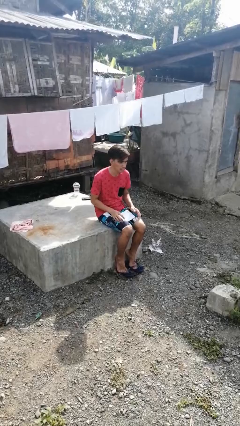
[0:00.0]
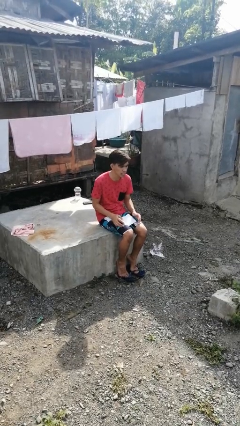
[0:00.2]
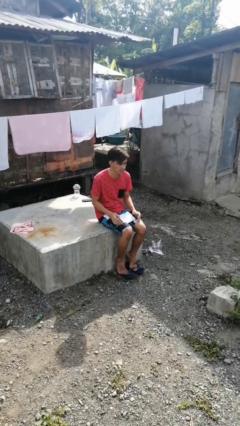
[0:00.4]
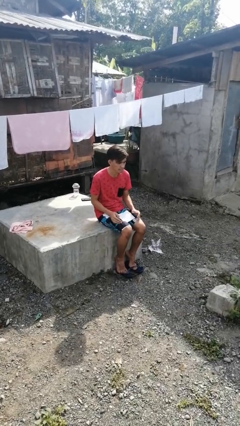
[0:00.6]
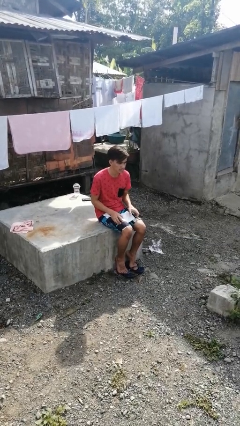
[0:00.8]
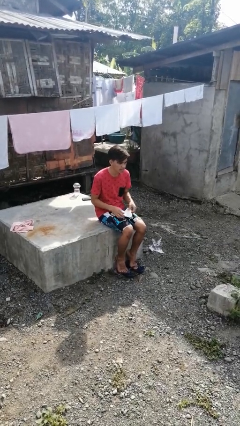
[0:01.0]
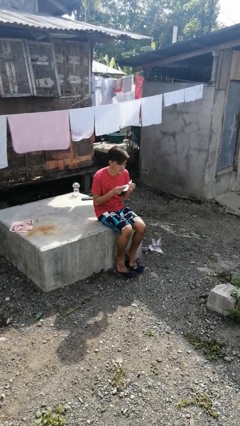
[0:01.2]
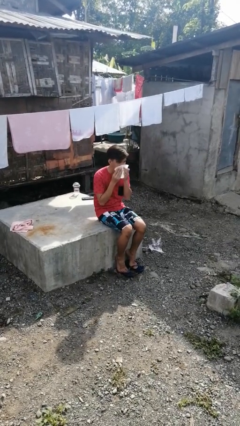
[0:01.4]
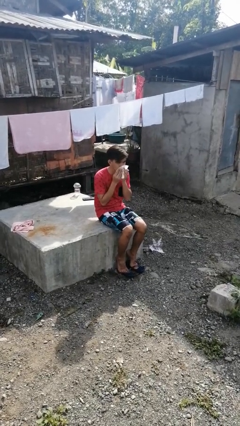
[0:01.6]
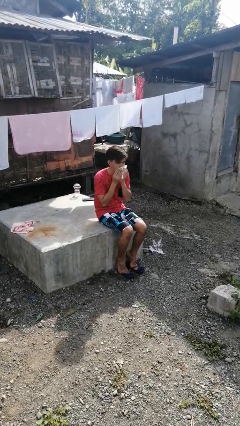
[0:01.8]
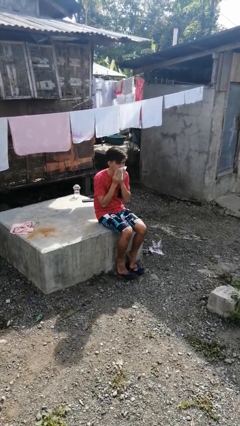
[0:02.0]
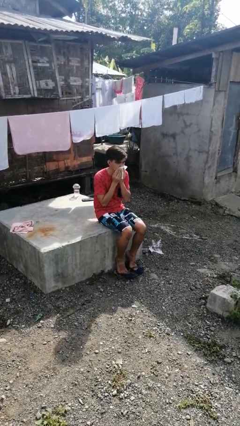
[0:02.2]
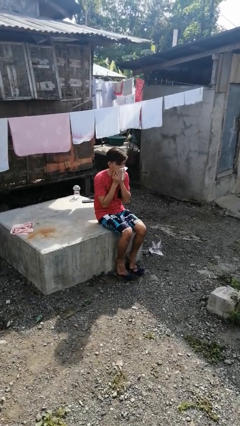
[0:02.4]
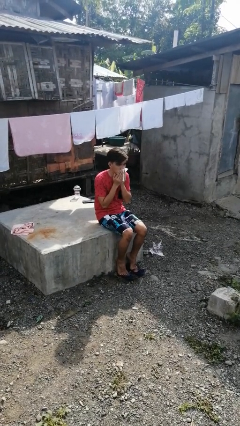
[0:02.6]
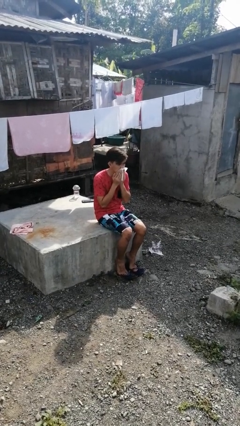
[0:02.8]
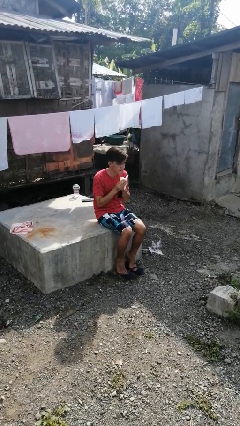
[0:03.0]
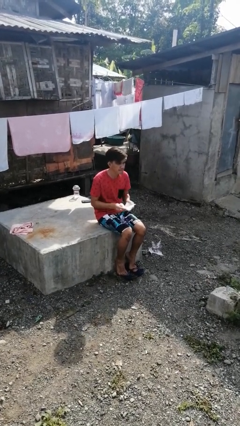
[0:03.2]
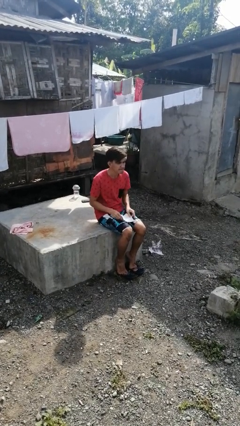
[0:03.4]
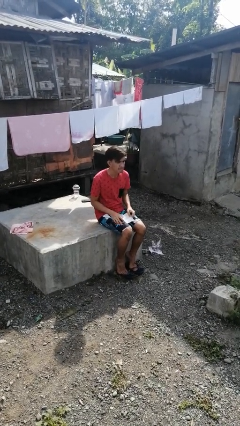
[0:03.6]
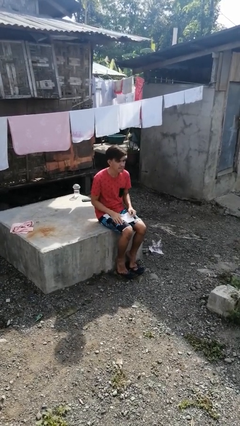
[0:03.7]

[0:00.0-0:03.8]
person wipes mouth with napkin

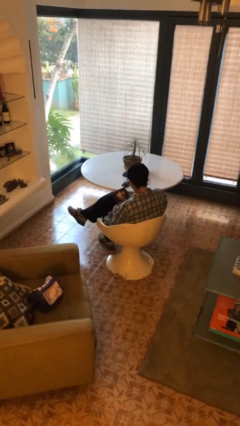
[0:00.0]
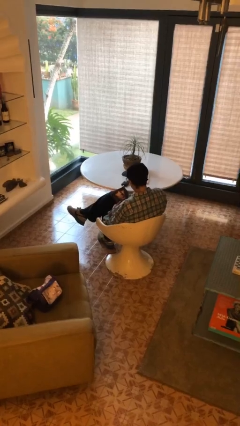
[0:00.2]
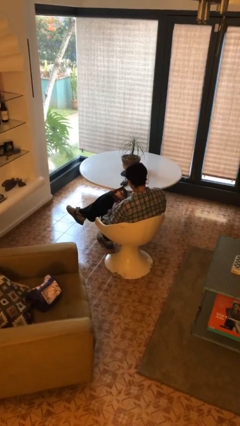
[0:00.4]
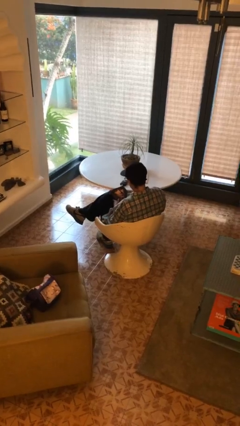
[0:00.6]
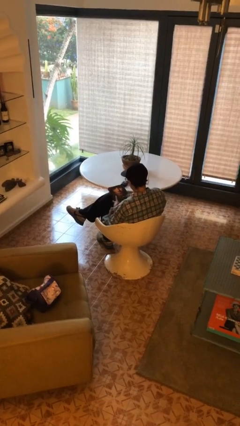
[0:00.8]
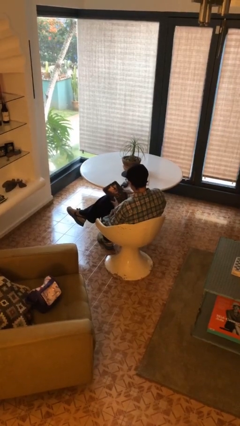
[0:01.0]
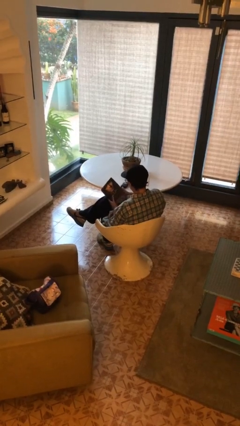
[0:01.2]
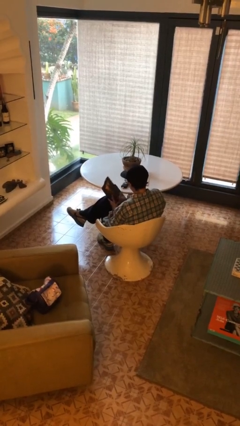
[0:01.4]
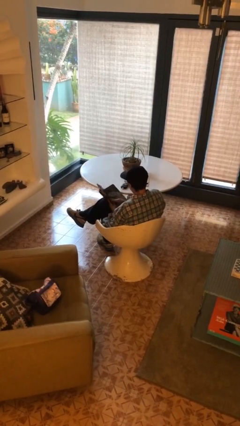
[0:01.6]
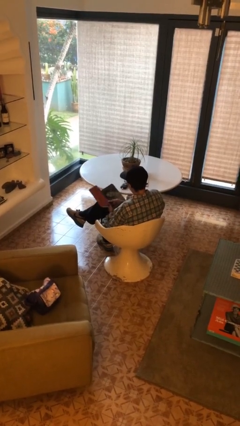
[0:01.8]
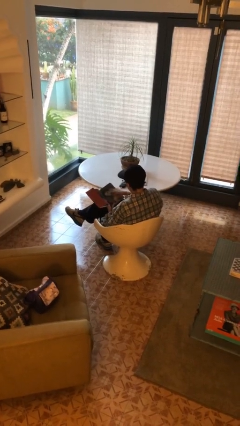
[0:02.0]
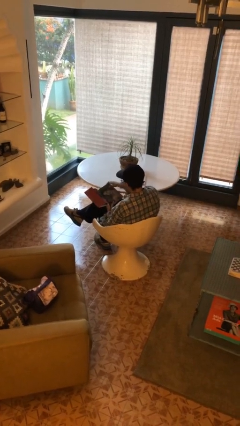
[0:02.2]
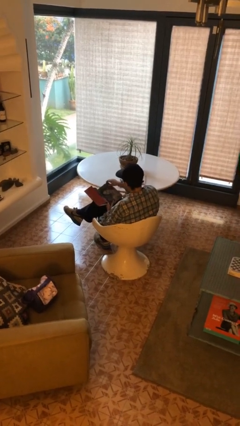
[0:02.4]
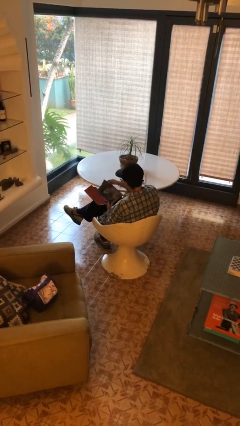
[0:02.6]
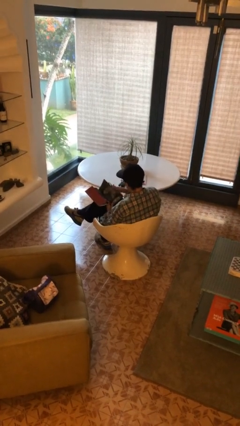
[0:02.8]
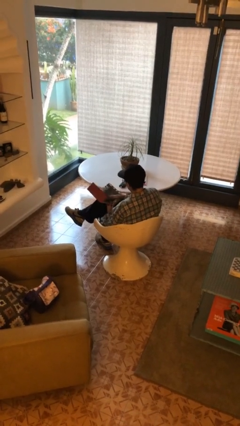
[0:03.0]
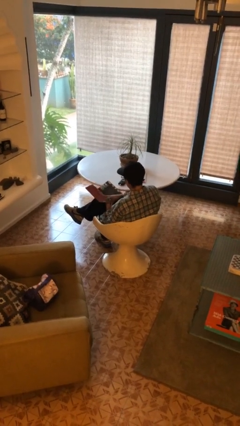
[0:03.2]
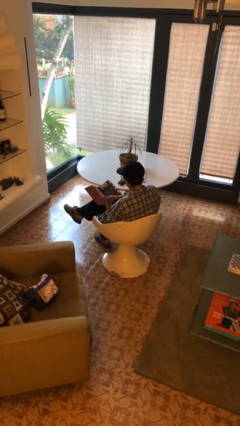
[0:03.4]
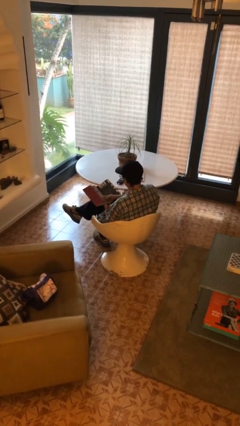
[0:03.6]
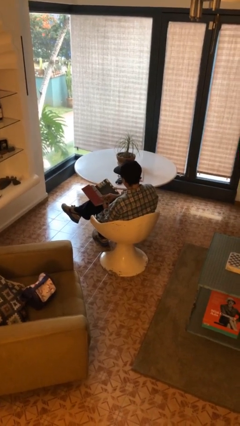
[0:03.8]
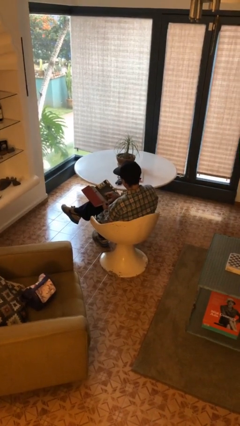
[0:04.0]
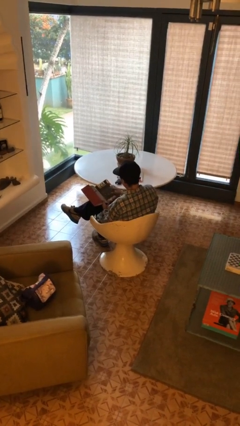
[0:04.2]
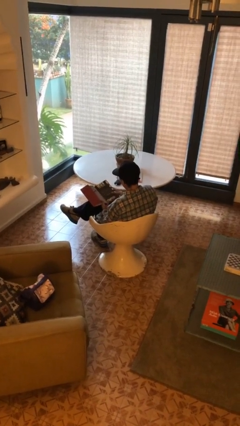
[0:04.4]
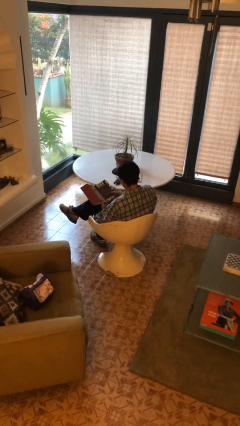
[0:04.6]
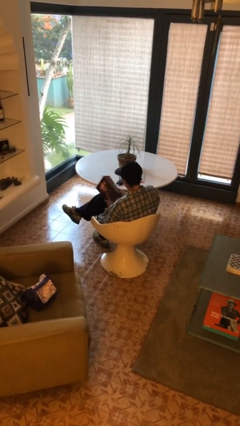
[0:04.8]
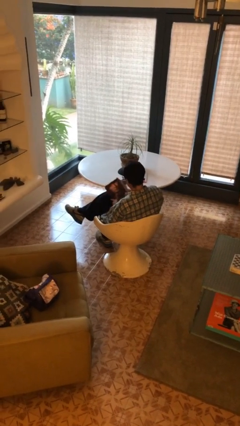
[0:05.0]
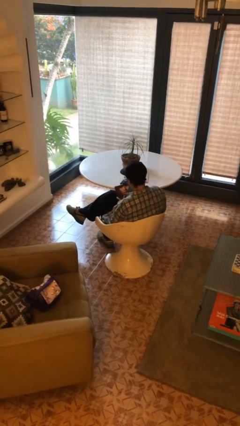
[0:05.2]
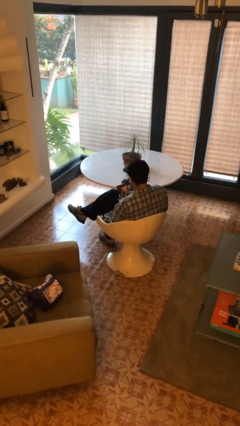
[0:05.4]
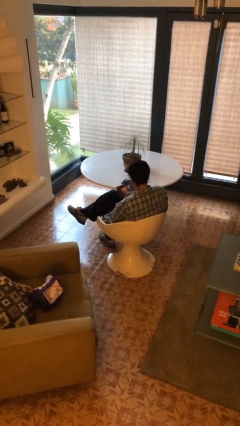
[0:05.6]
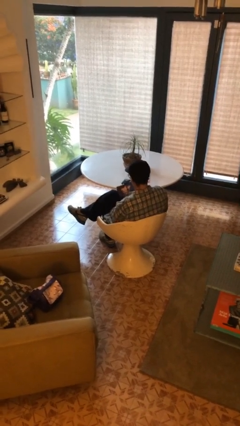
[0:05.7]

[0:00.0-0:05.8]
person reads book

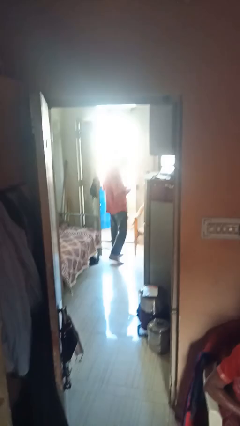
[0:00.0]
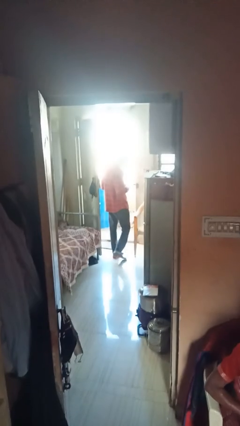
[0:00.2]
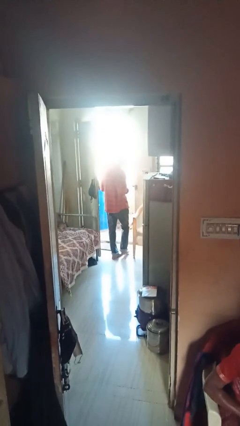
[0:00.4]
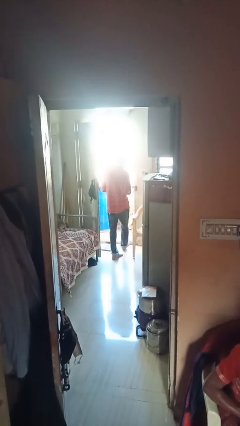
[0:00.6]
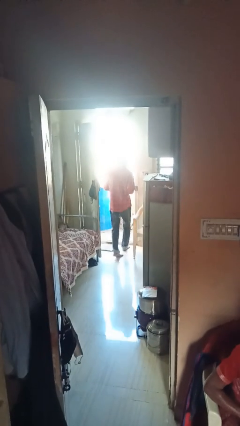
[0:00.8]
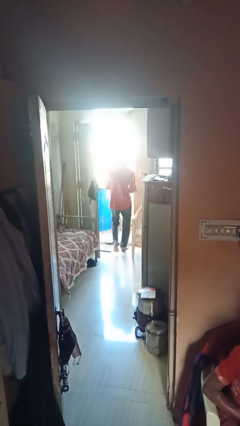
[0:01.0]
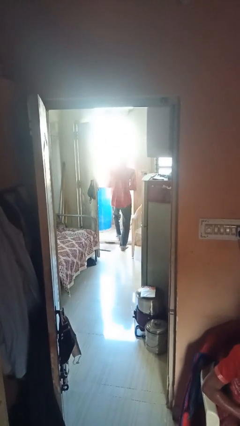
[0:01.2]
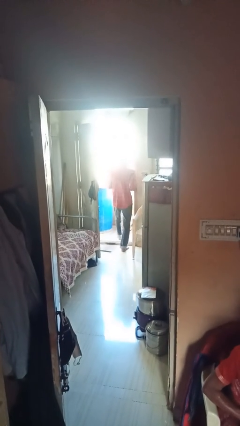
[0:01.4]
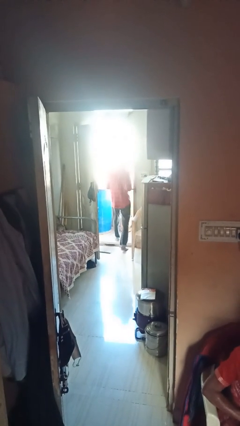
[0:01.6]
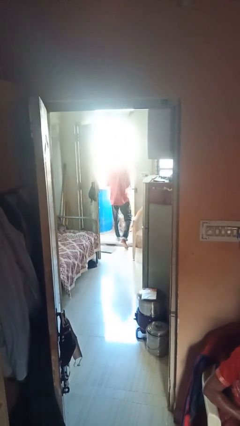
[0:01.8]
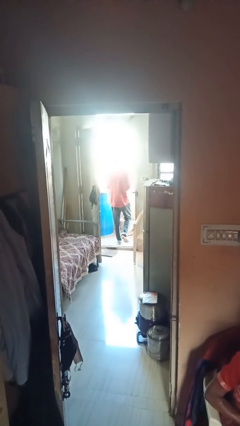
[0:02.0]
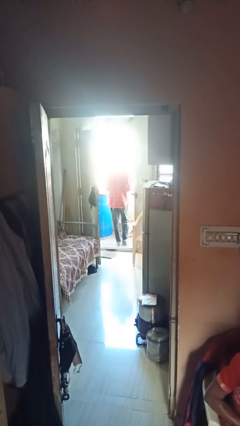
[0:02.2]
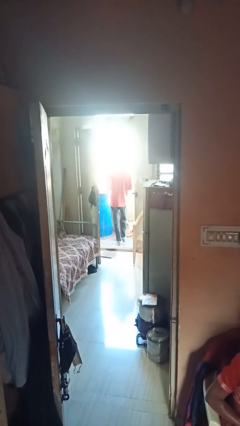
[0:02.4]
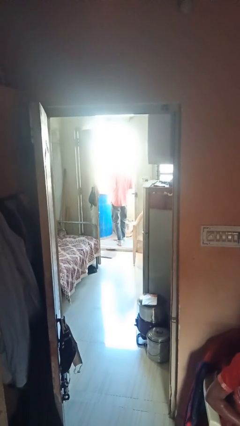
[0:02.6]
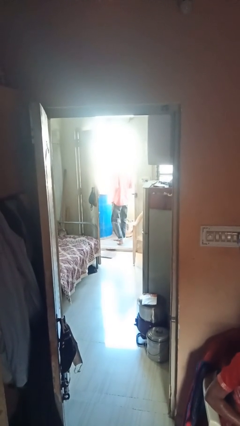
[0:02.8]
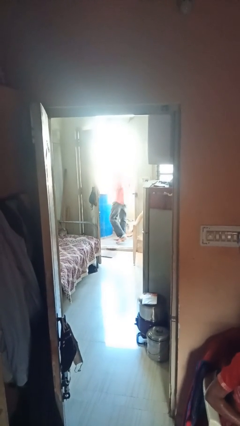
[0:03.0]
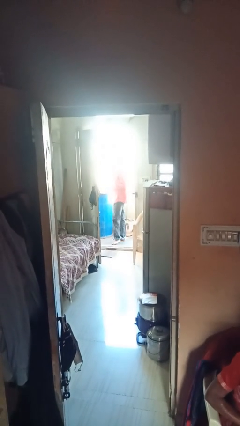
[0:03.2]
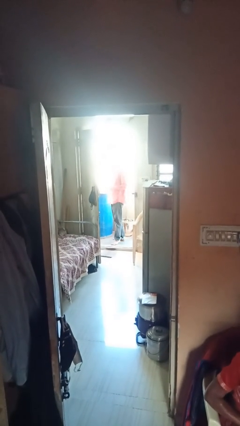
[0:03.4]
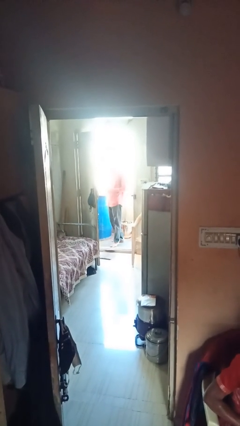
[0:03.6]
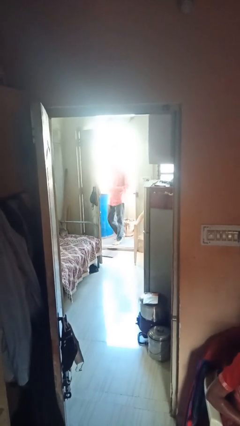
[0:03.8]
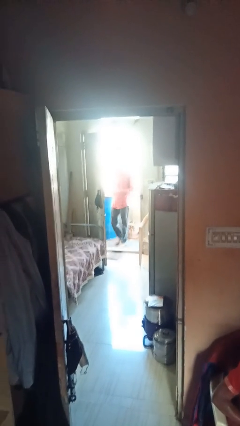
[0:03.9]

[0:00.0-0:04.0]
person exits scene through structure

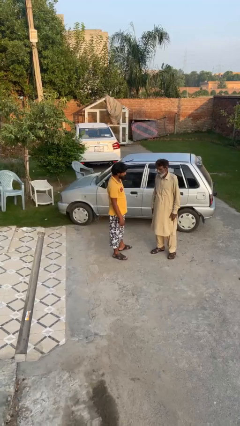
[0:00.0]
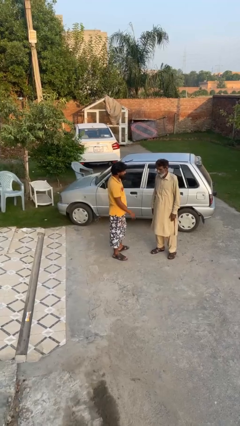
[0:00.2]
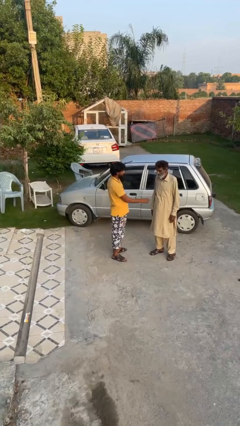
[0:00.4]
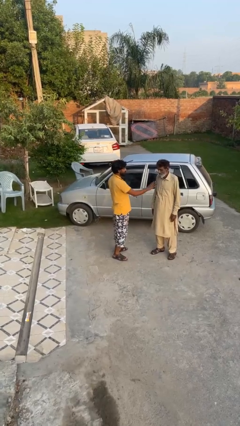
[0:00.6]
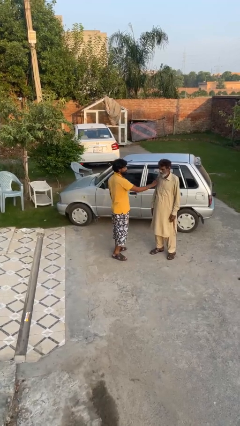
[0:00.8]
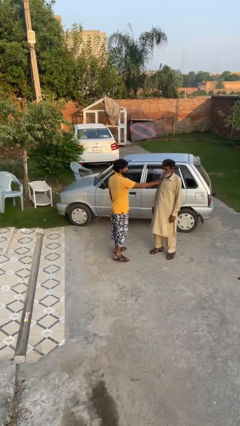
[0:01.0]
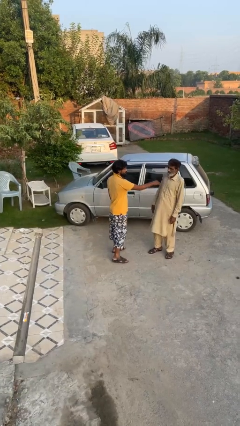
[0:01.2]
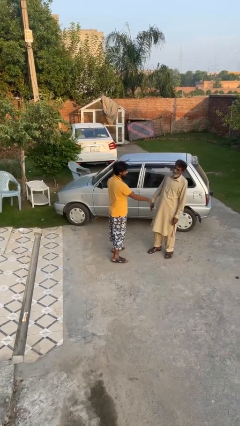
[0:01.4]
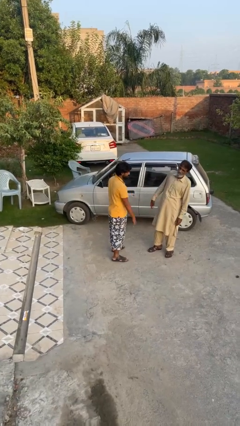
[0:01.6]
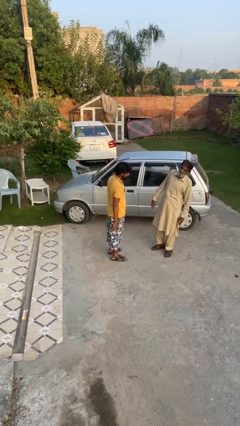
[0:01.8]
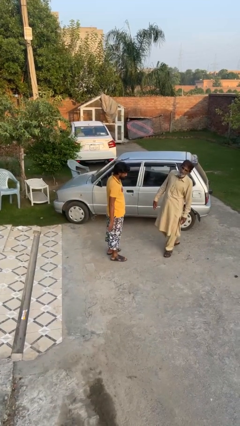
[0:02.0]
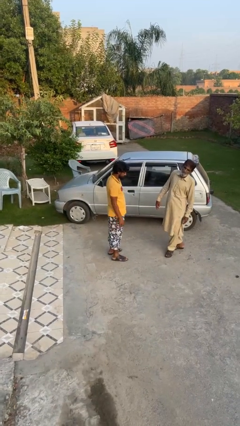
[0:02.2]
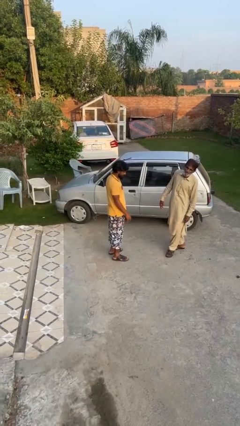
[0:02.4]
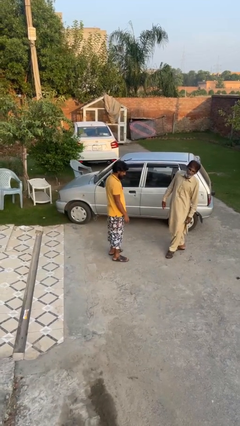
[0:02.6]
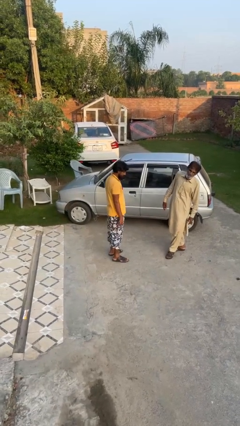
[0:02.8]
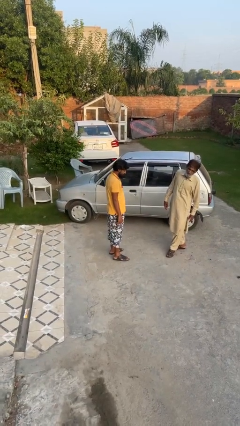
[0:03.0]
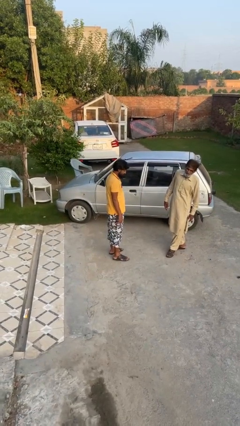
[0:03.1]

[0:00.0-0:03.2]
person shoves person

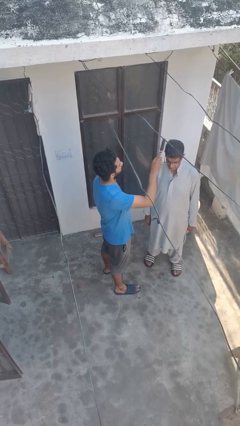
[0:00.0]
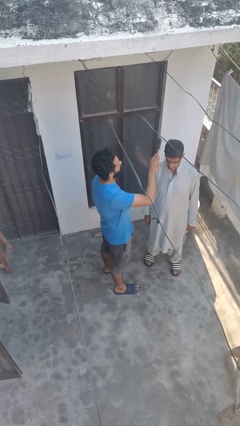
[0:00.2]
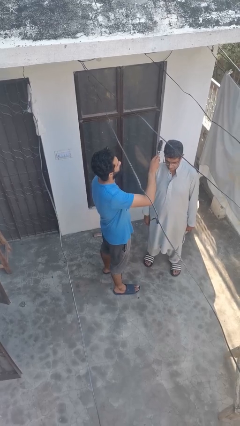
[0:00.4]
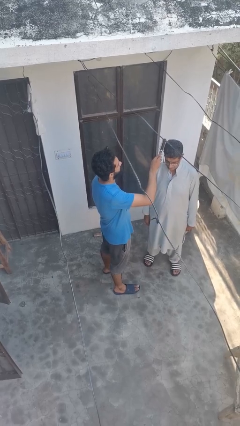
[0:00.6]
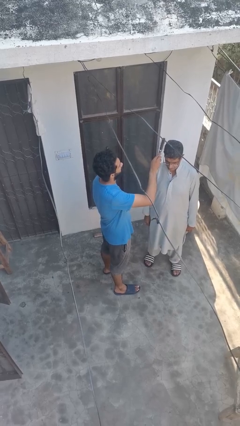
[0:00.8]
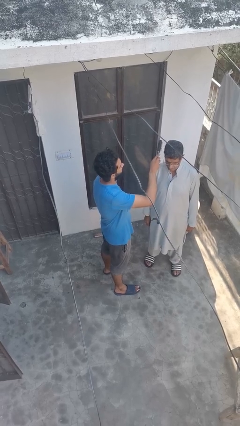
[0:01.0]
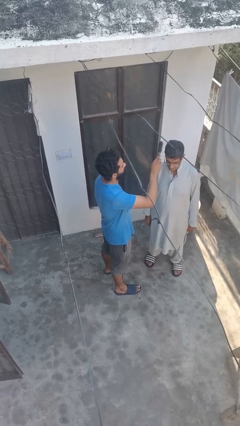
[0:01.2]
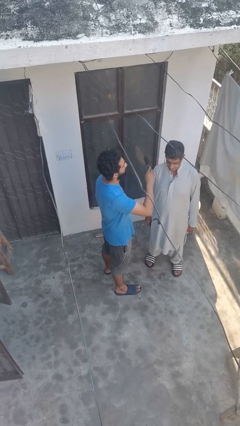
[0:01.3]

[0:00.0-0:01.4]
person brushes hair of person
